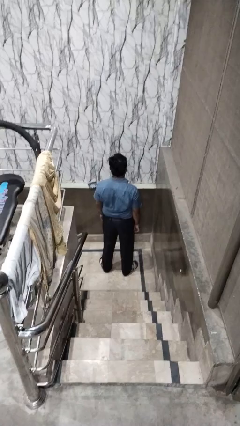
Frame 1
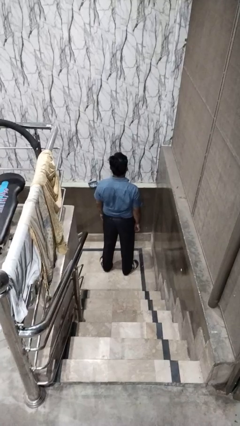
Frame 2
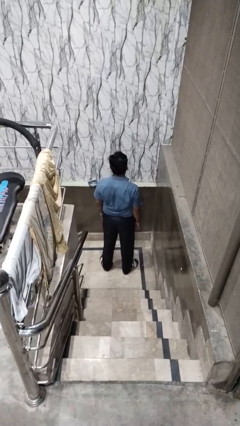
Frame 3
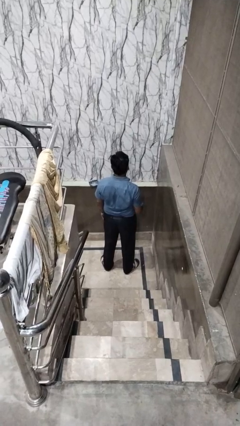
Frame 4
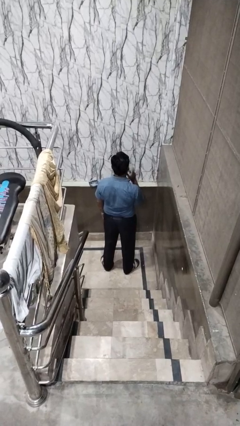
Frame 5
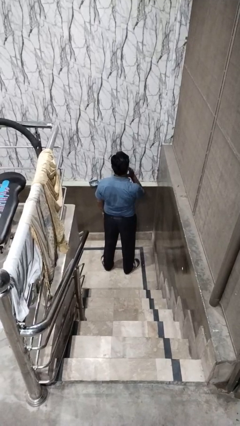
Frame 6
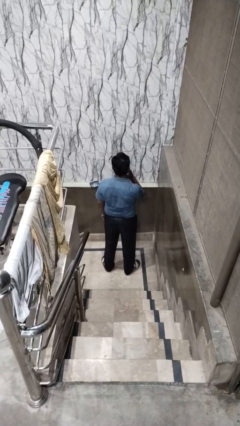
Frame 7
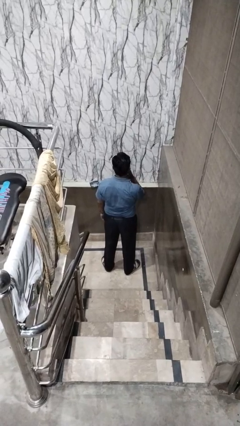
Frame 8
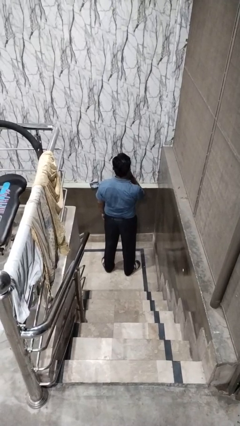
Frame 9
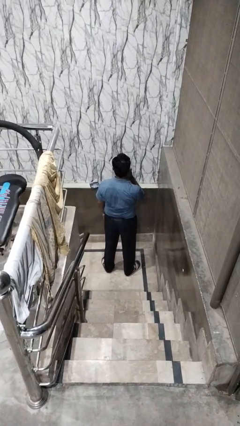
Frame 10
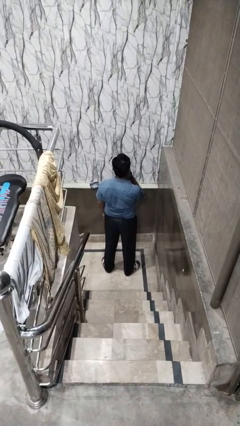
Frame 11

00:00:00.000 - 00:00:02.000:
person strokes chin

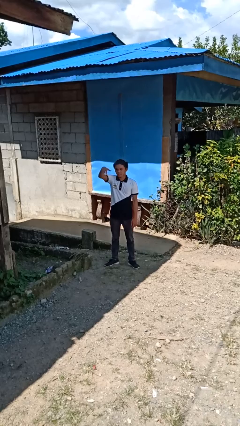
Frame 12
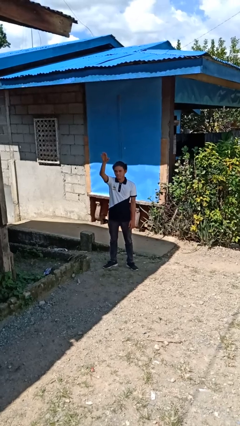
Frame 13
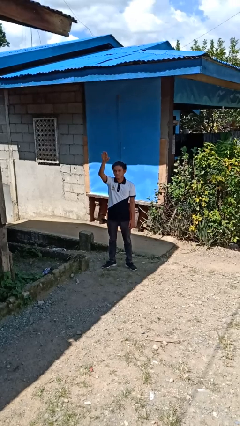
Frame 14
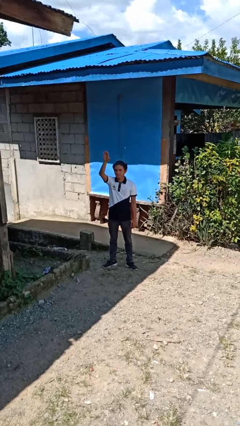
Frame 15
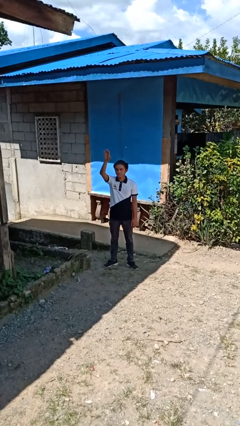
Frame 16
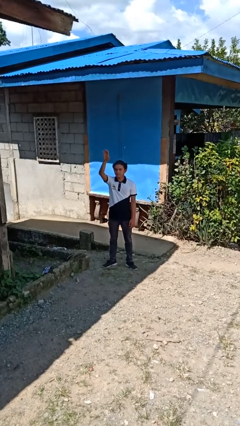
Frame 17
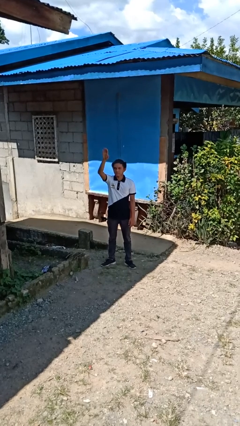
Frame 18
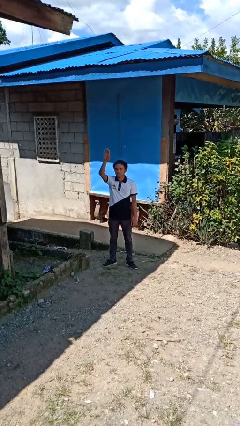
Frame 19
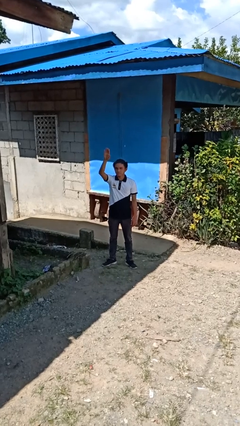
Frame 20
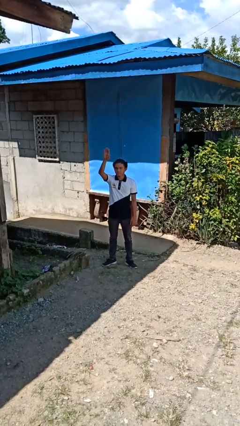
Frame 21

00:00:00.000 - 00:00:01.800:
person gestures swipe up

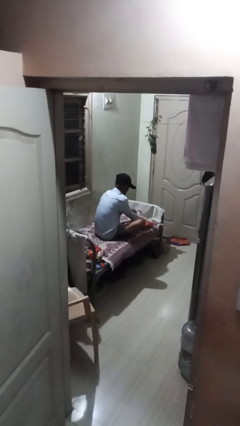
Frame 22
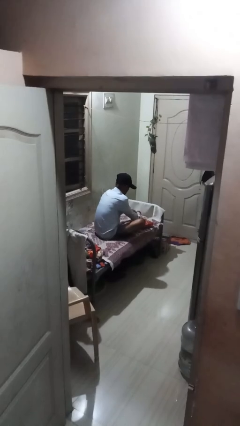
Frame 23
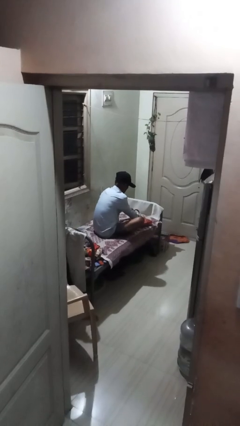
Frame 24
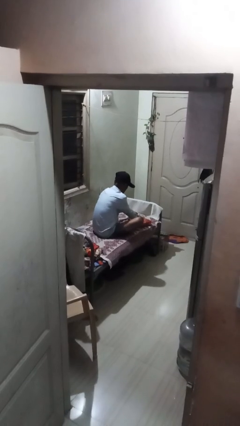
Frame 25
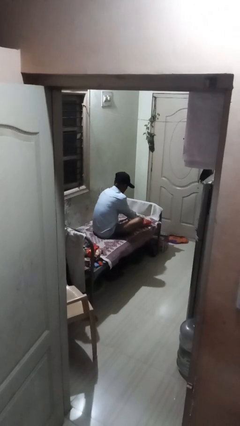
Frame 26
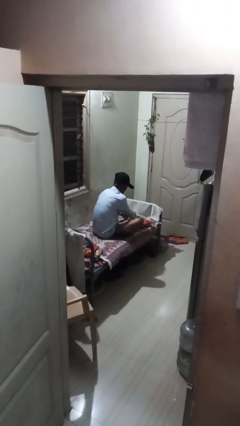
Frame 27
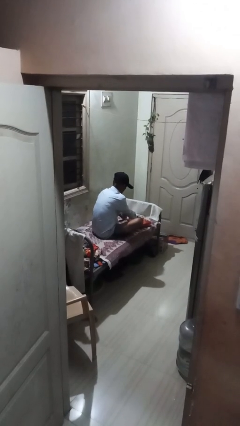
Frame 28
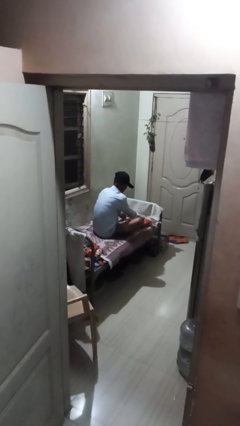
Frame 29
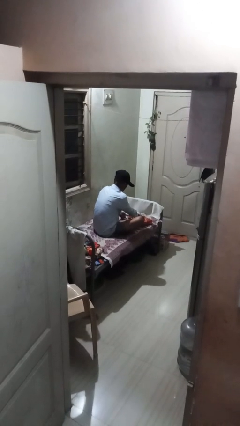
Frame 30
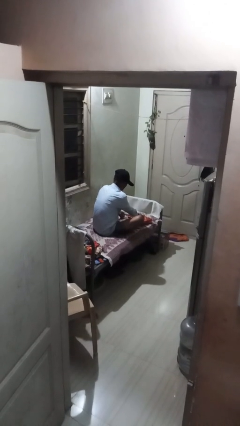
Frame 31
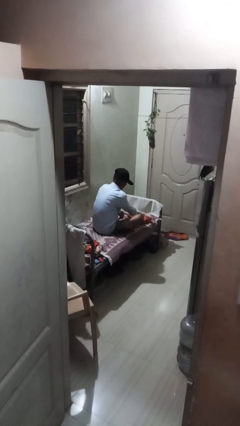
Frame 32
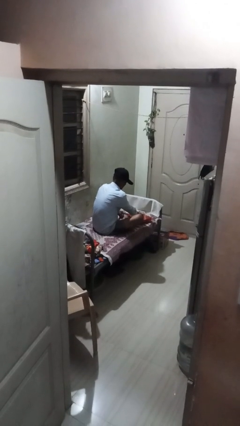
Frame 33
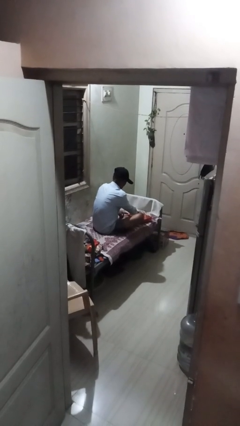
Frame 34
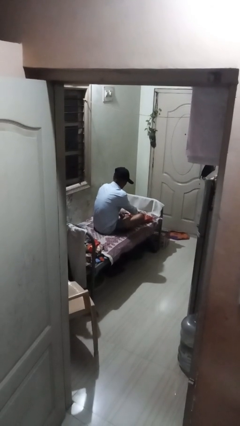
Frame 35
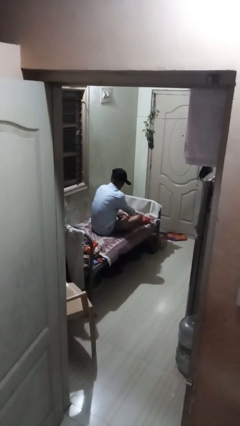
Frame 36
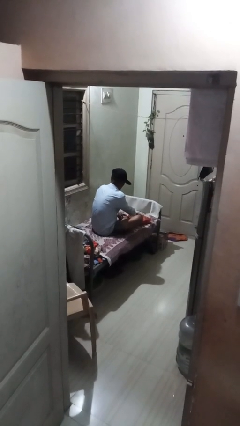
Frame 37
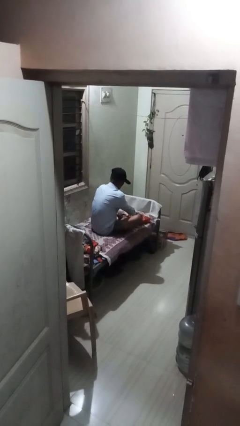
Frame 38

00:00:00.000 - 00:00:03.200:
person wraps box

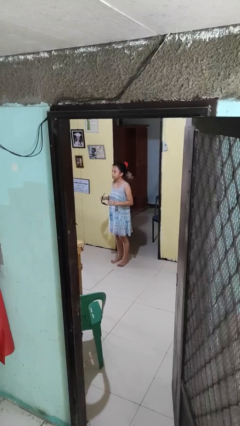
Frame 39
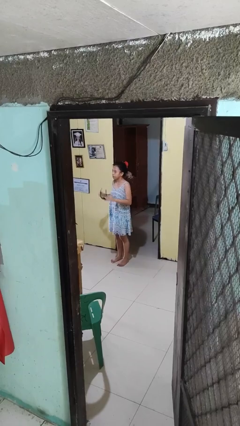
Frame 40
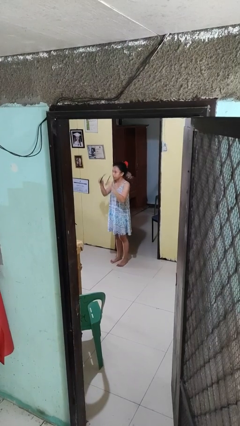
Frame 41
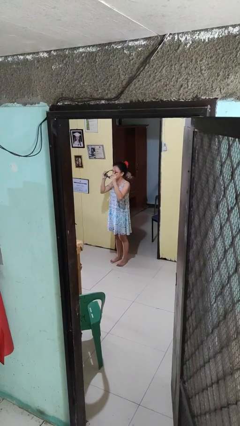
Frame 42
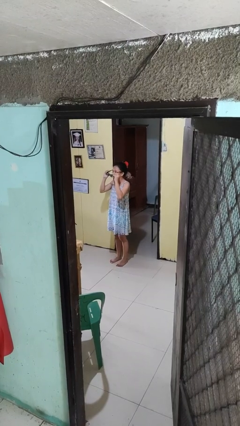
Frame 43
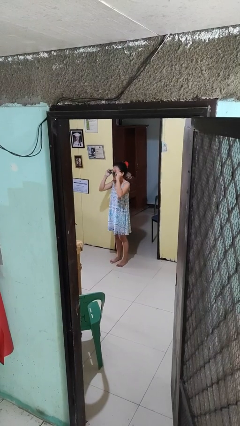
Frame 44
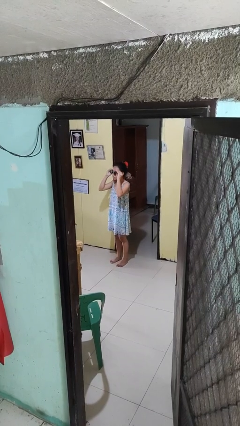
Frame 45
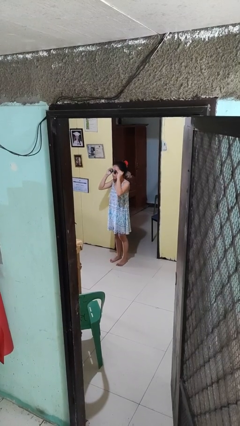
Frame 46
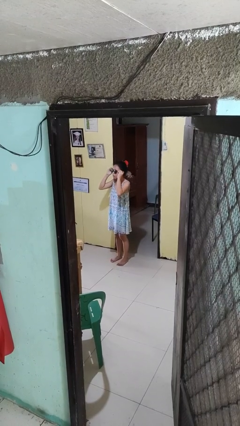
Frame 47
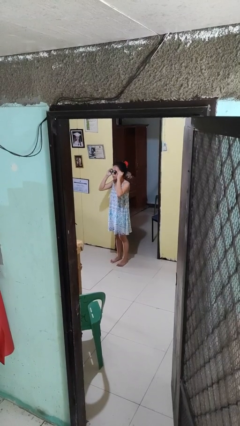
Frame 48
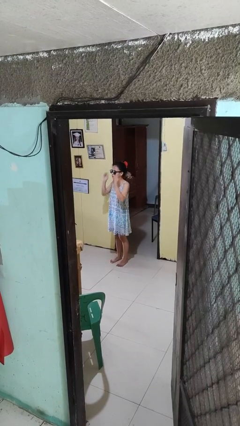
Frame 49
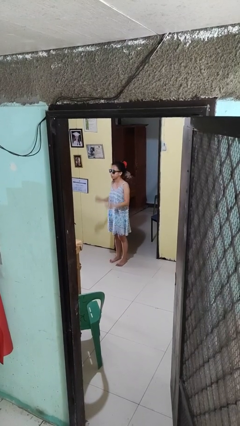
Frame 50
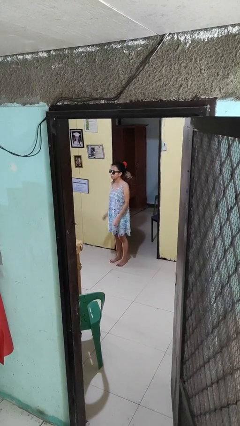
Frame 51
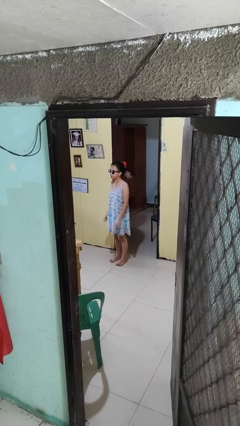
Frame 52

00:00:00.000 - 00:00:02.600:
person puts on sunglasses

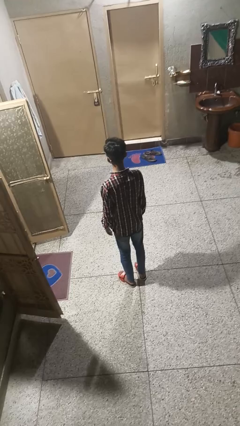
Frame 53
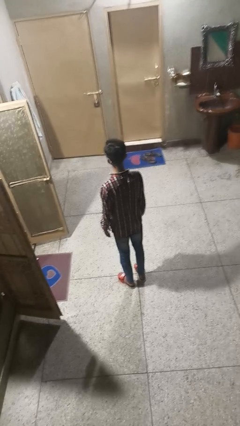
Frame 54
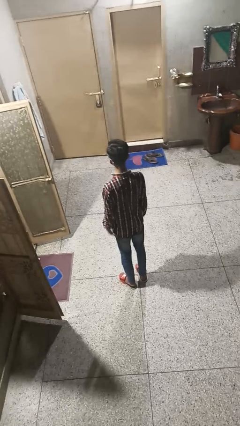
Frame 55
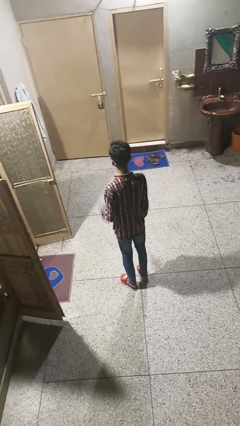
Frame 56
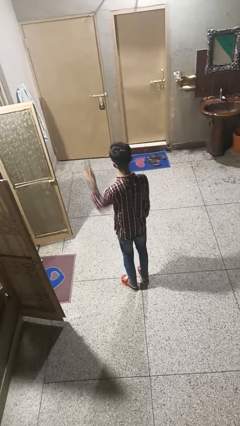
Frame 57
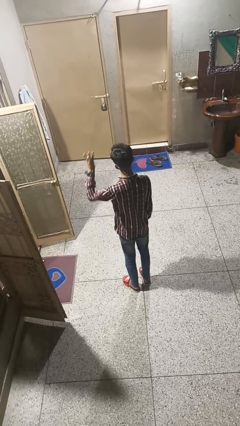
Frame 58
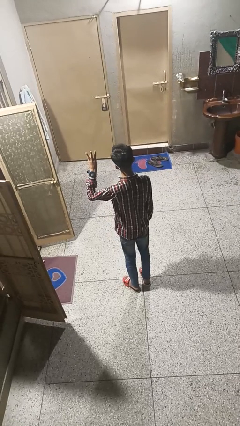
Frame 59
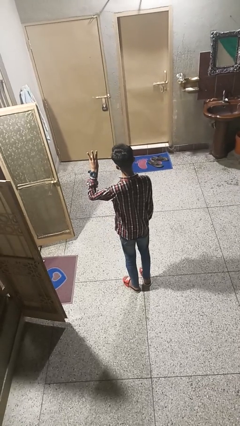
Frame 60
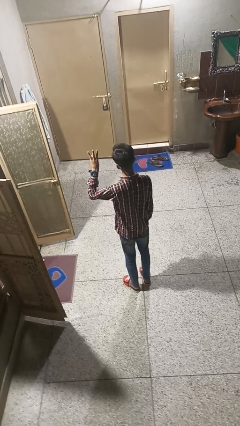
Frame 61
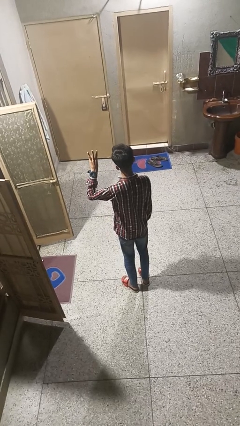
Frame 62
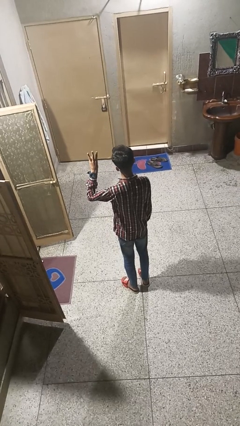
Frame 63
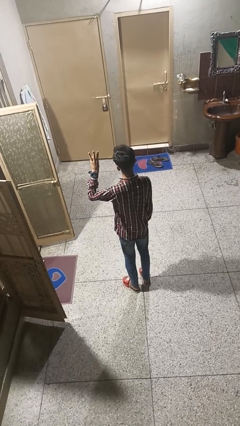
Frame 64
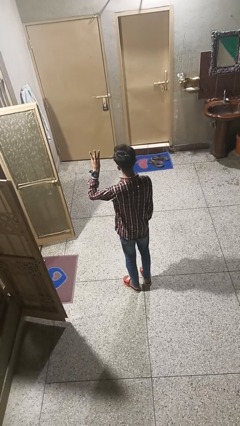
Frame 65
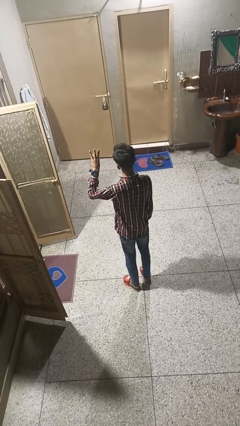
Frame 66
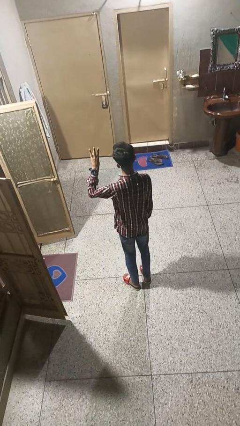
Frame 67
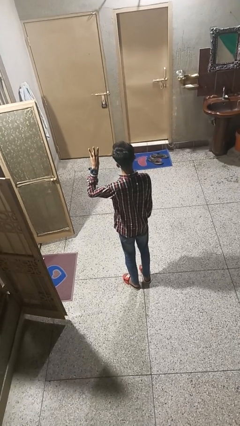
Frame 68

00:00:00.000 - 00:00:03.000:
person gestures number three

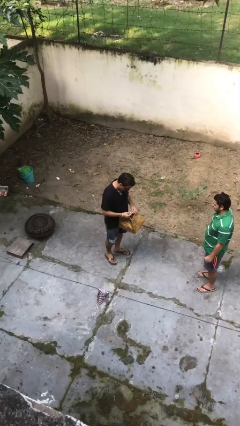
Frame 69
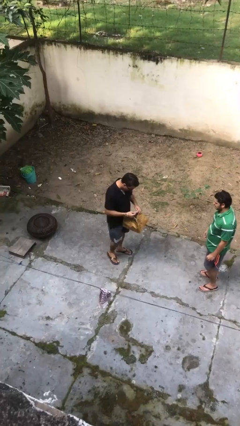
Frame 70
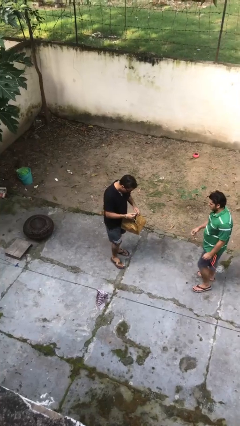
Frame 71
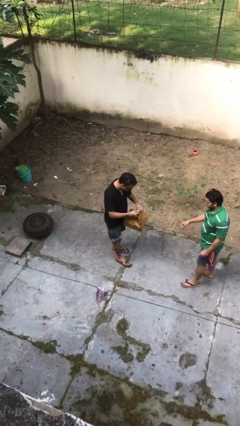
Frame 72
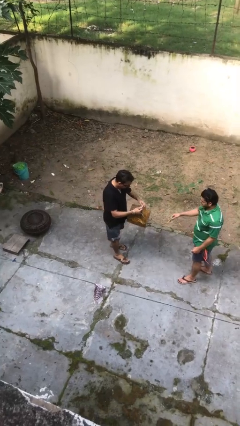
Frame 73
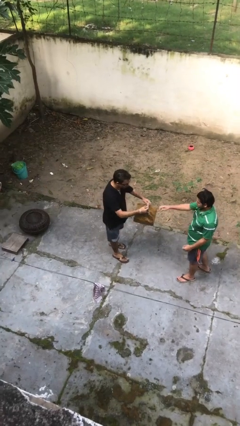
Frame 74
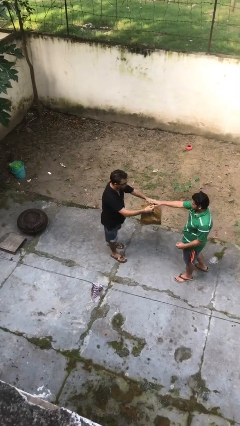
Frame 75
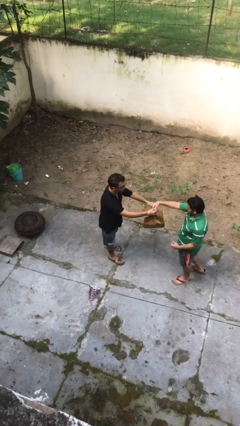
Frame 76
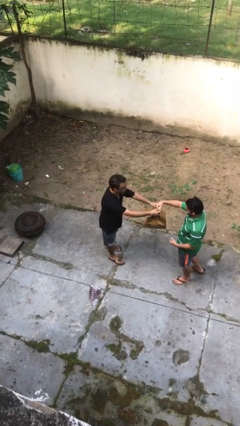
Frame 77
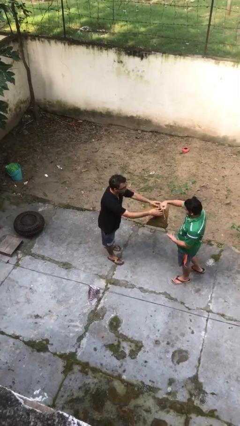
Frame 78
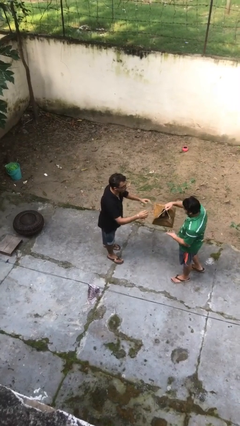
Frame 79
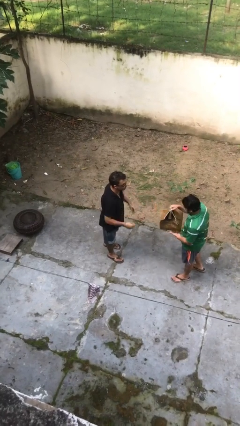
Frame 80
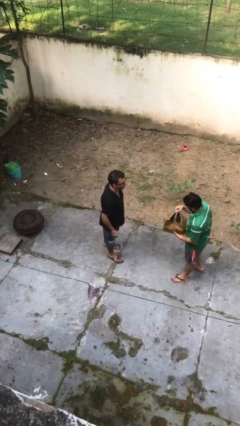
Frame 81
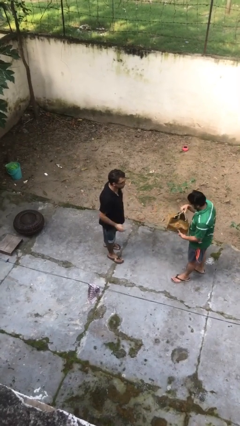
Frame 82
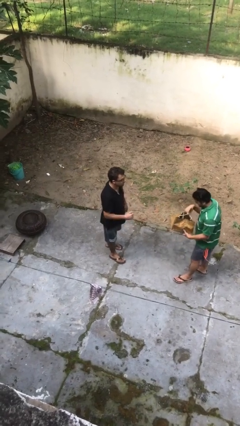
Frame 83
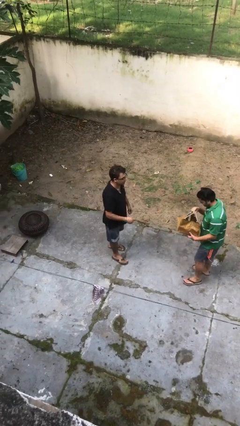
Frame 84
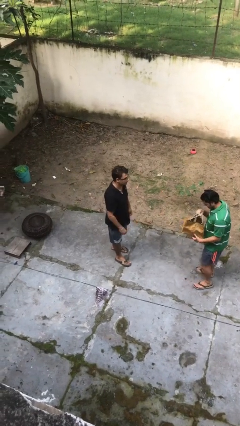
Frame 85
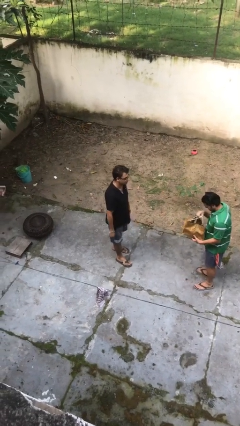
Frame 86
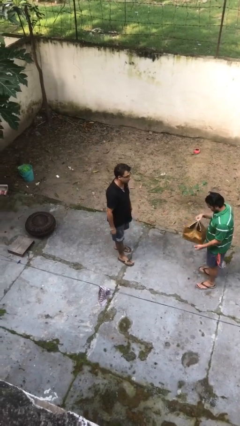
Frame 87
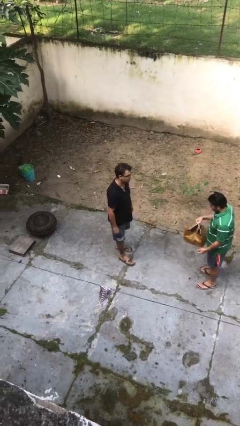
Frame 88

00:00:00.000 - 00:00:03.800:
person transfers object to person

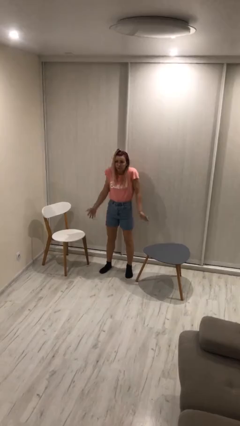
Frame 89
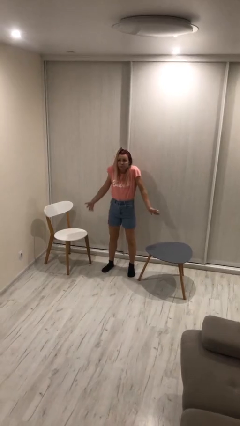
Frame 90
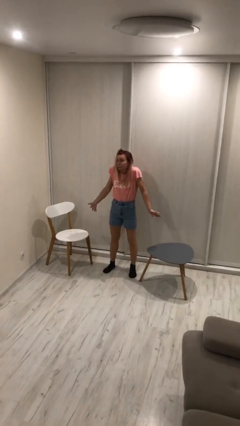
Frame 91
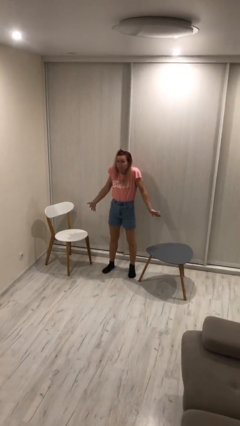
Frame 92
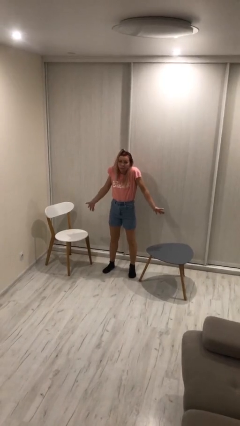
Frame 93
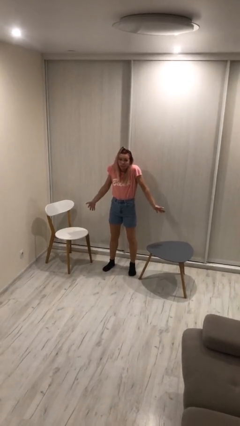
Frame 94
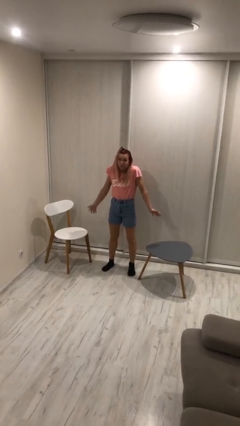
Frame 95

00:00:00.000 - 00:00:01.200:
person shrugs
